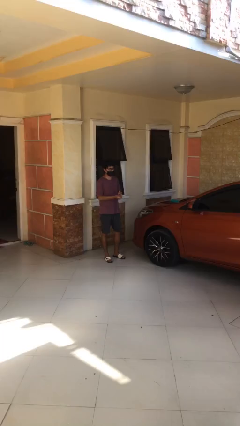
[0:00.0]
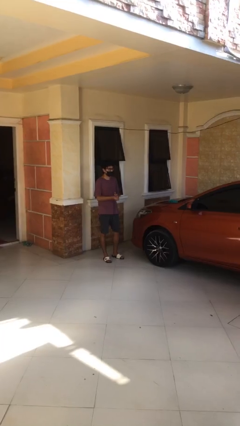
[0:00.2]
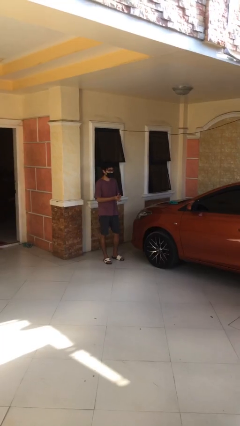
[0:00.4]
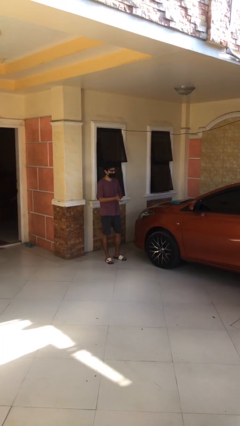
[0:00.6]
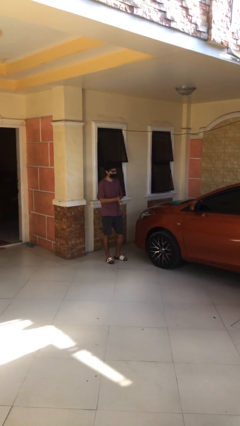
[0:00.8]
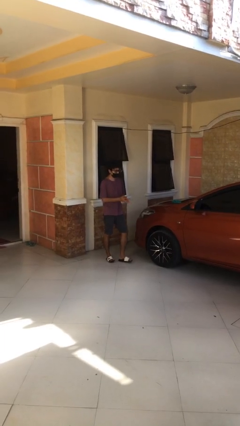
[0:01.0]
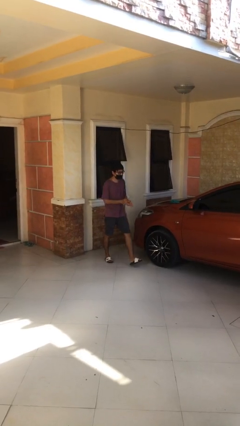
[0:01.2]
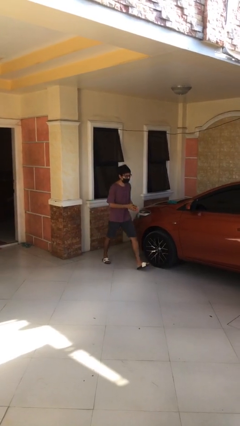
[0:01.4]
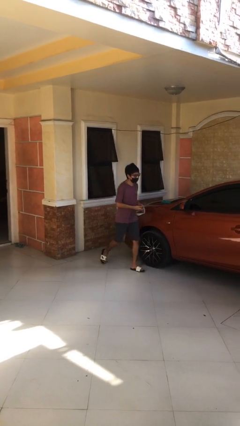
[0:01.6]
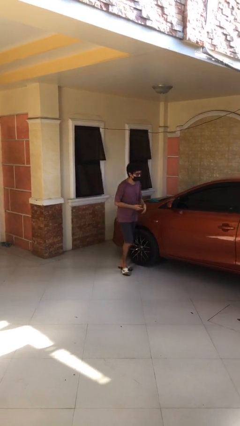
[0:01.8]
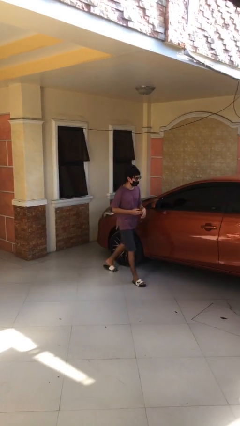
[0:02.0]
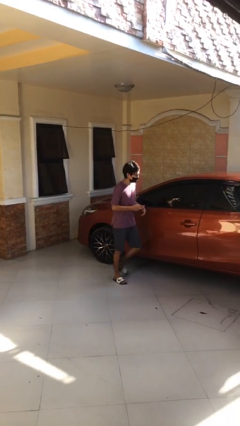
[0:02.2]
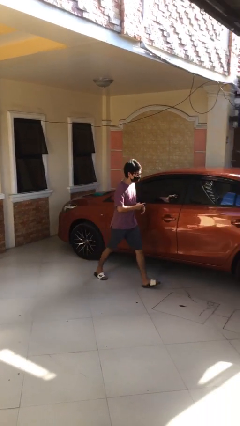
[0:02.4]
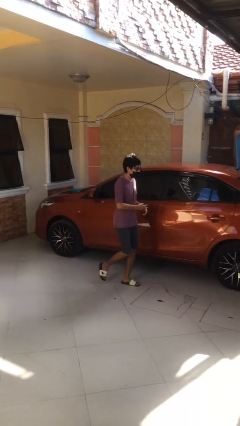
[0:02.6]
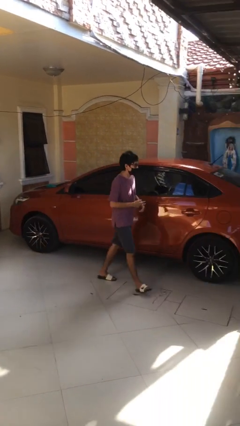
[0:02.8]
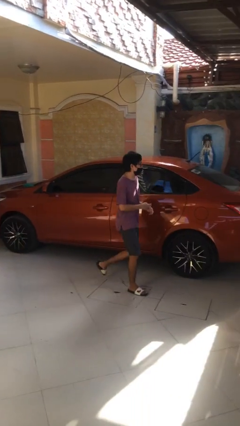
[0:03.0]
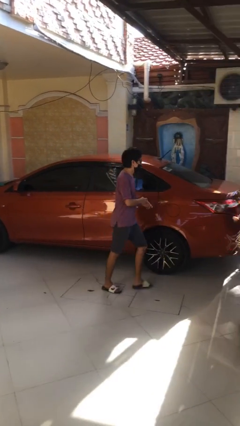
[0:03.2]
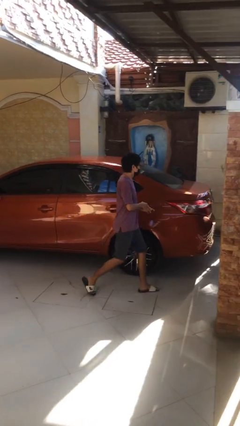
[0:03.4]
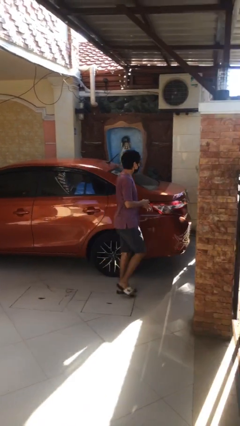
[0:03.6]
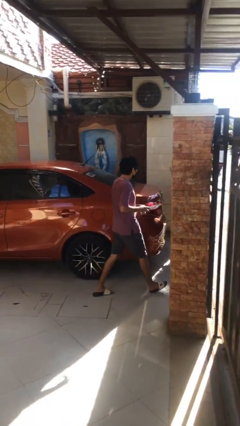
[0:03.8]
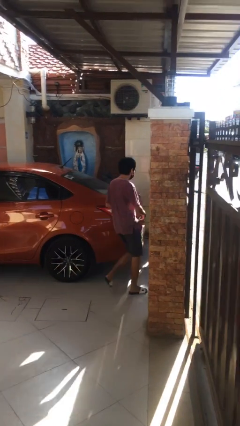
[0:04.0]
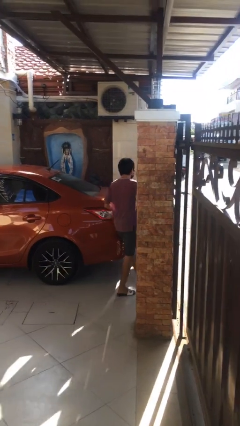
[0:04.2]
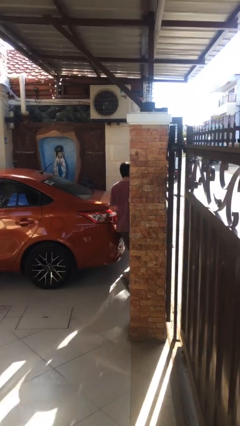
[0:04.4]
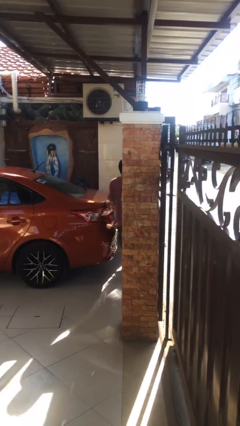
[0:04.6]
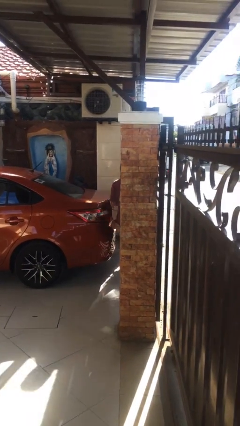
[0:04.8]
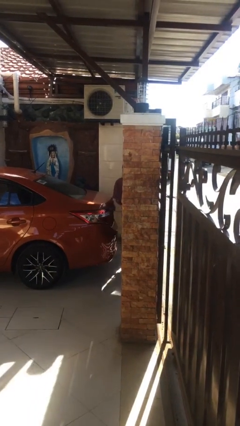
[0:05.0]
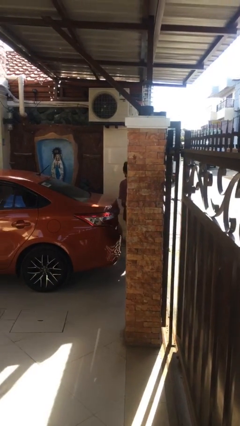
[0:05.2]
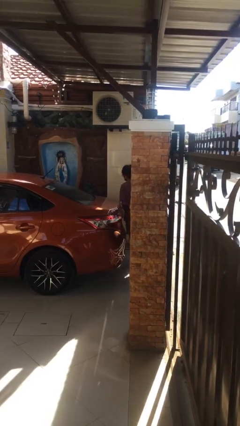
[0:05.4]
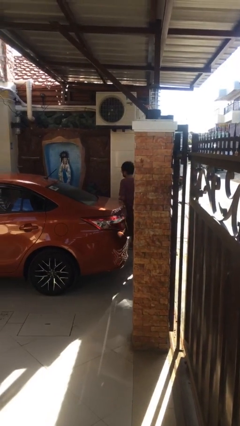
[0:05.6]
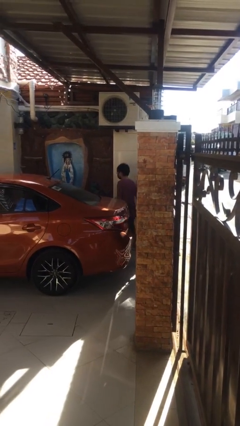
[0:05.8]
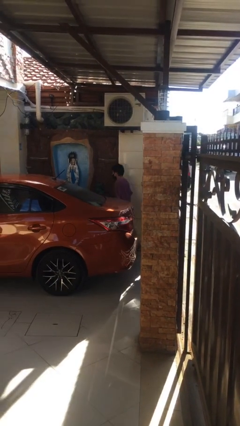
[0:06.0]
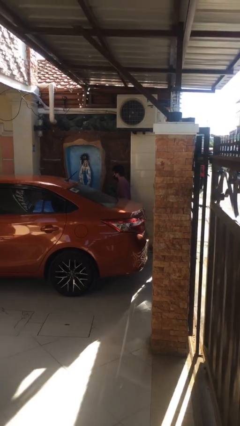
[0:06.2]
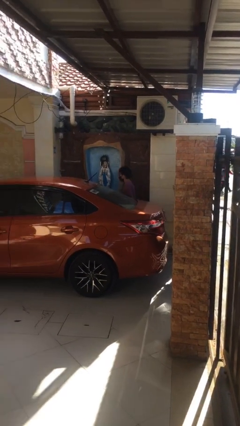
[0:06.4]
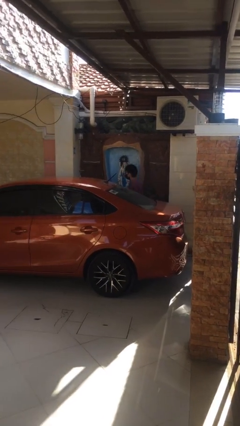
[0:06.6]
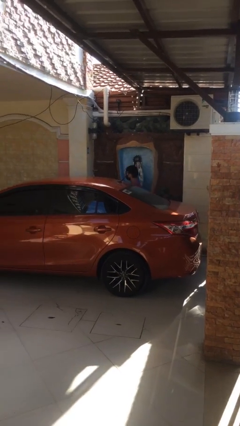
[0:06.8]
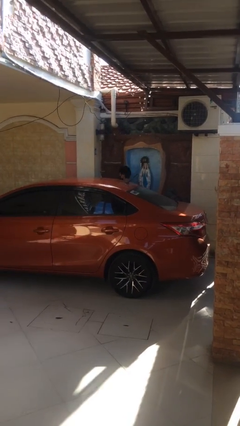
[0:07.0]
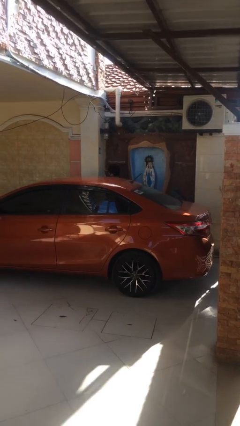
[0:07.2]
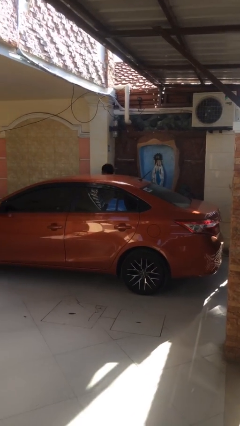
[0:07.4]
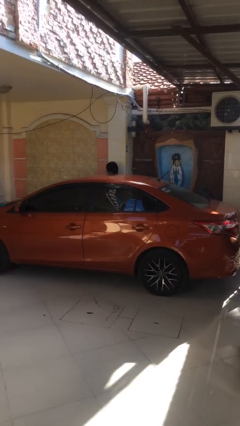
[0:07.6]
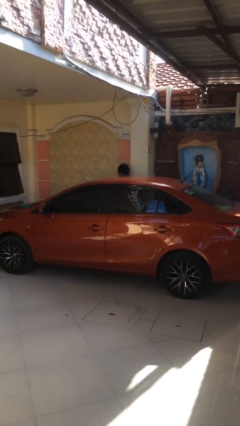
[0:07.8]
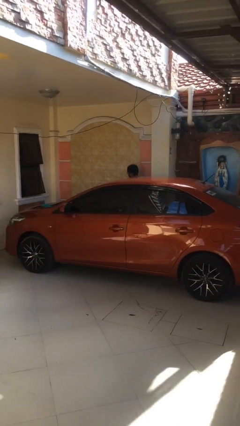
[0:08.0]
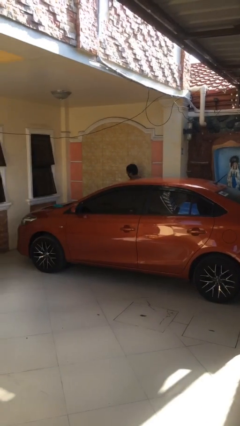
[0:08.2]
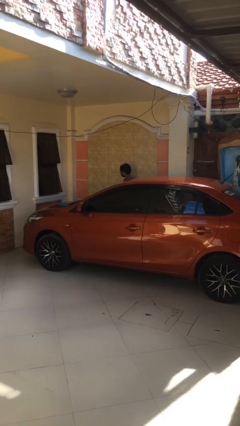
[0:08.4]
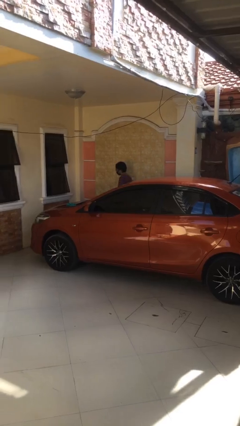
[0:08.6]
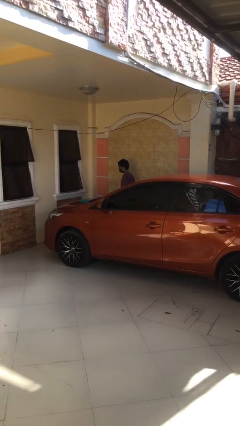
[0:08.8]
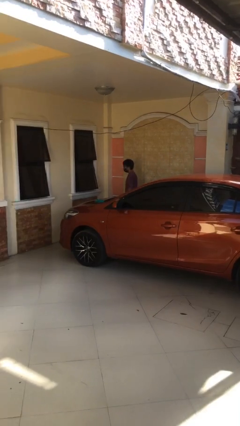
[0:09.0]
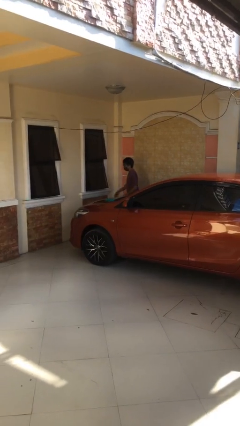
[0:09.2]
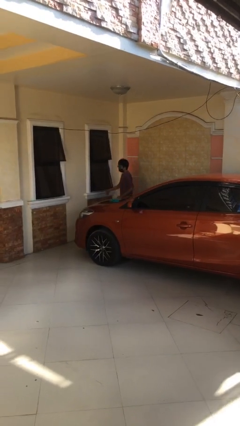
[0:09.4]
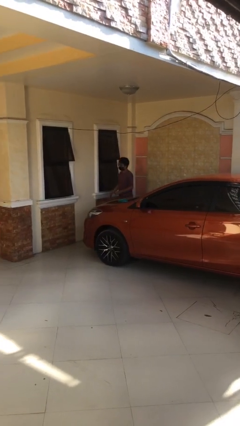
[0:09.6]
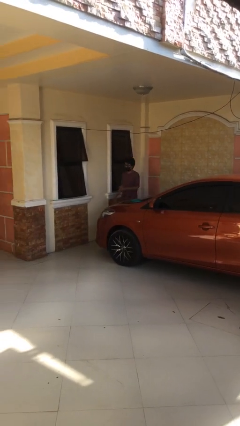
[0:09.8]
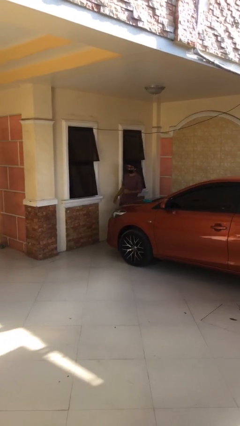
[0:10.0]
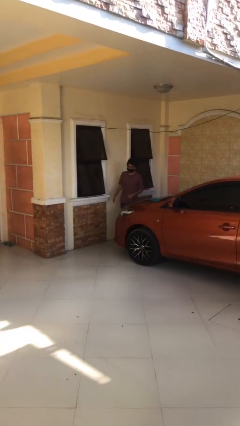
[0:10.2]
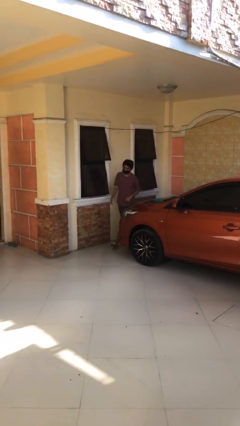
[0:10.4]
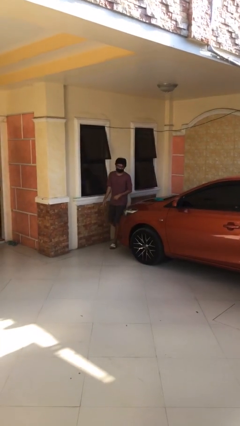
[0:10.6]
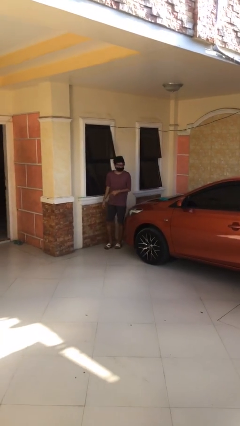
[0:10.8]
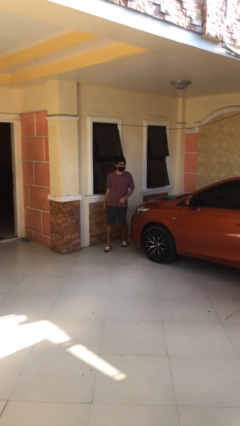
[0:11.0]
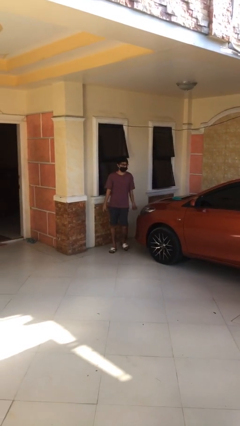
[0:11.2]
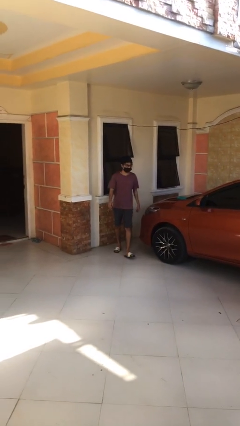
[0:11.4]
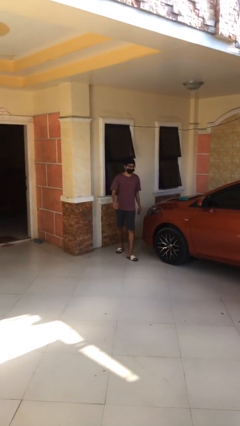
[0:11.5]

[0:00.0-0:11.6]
person walks around car

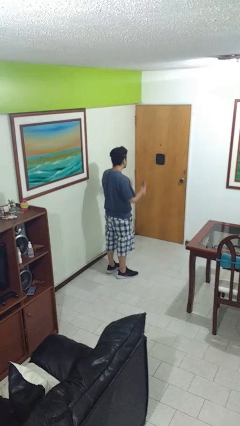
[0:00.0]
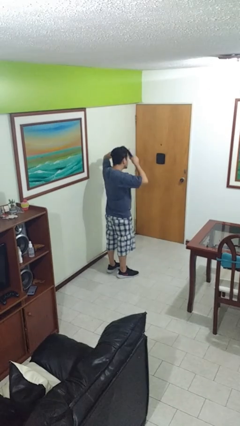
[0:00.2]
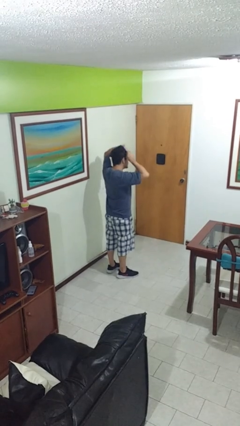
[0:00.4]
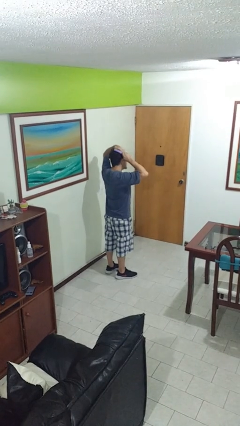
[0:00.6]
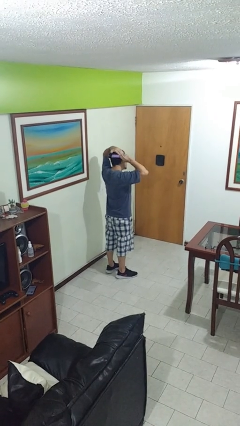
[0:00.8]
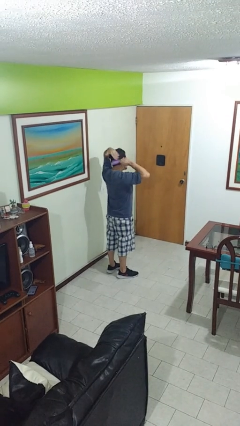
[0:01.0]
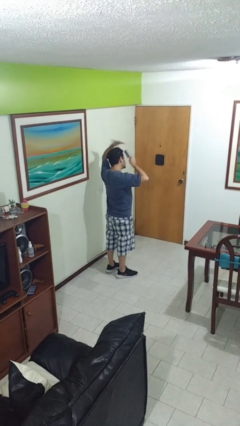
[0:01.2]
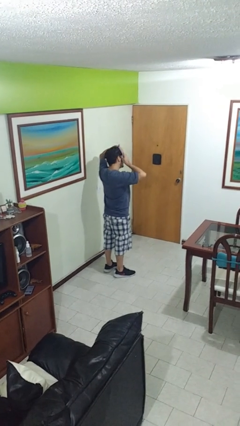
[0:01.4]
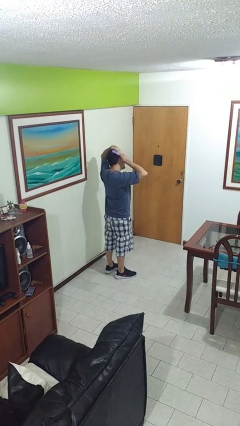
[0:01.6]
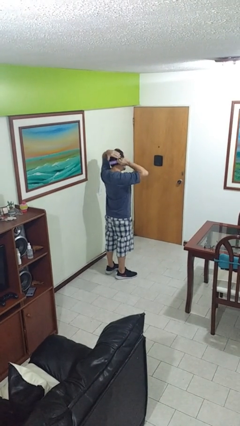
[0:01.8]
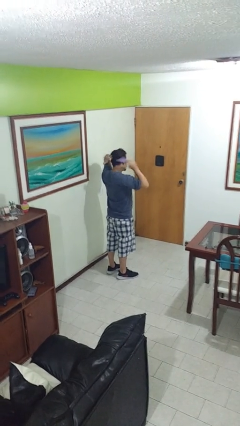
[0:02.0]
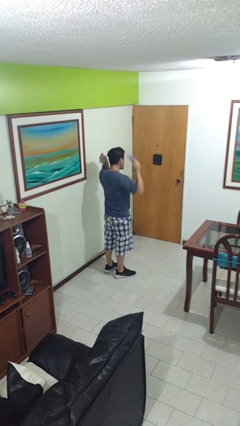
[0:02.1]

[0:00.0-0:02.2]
person brushes hair

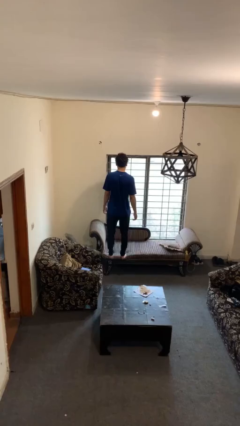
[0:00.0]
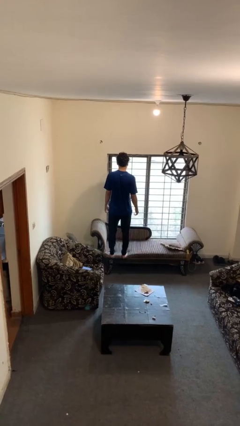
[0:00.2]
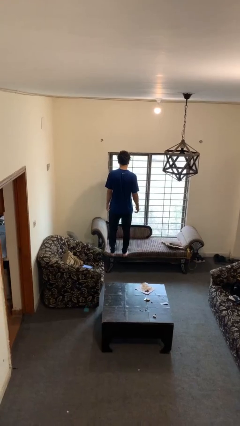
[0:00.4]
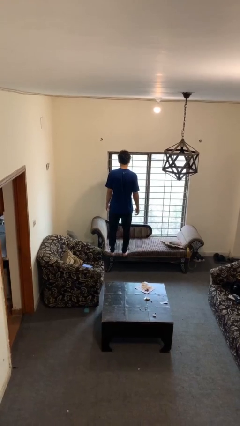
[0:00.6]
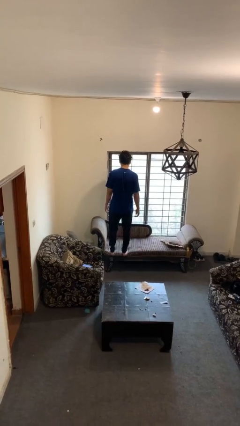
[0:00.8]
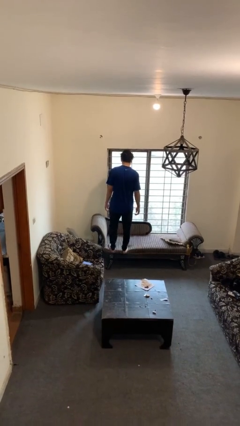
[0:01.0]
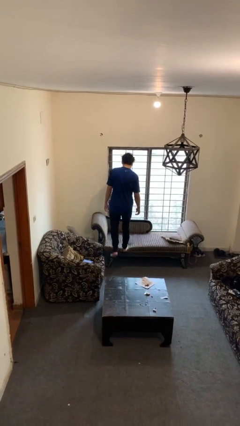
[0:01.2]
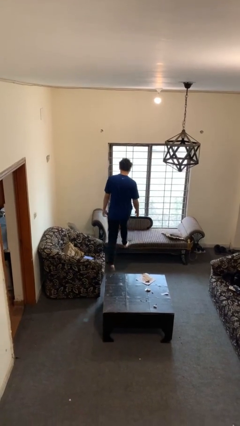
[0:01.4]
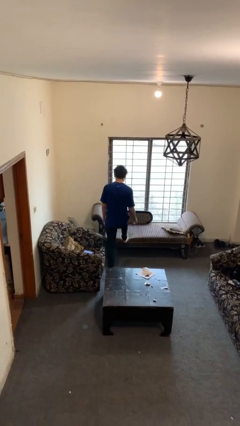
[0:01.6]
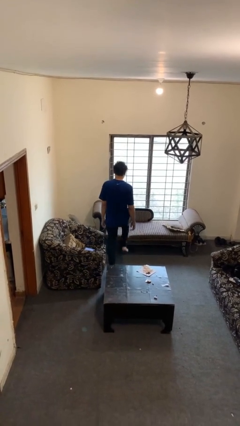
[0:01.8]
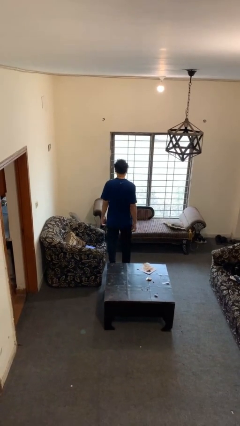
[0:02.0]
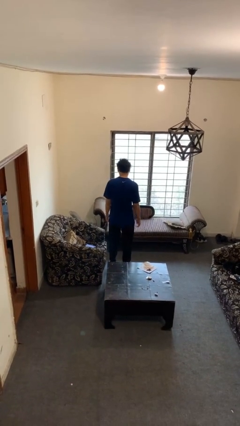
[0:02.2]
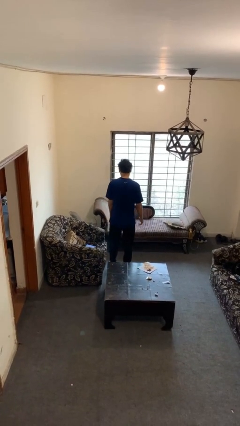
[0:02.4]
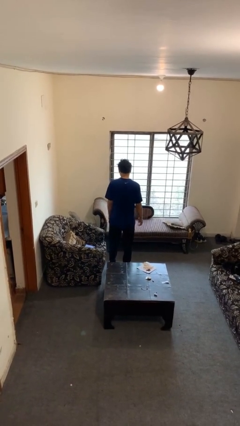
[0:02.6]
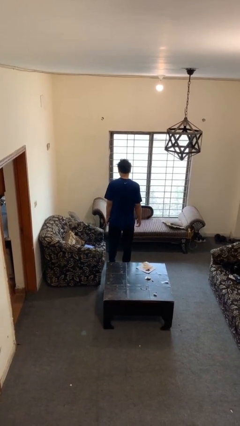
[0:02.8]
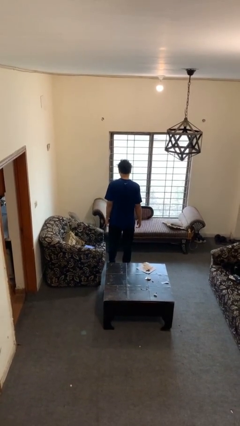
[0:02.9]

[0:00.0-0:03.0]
person climbs off couch

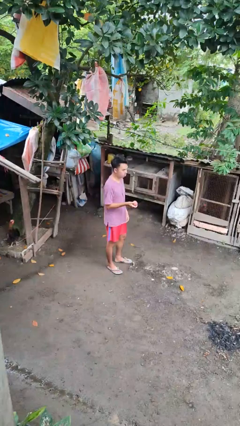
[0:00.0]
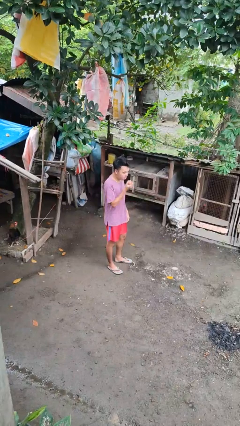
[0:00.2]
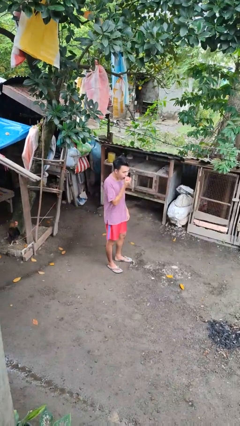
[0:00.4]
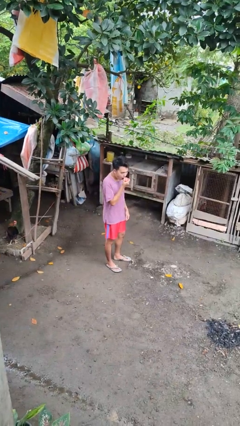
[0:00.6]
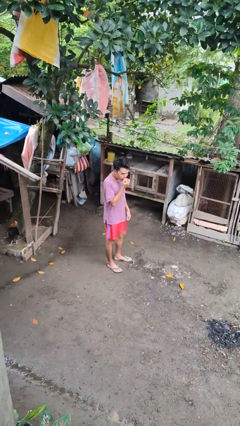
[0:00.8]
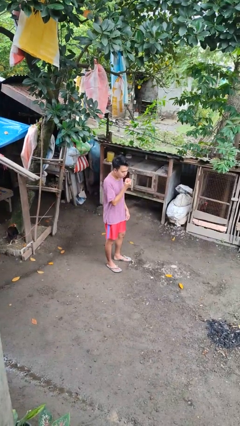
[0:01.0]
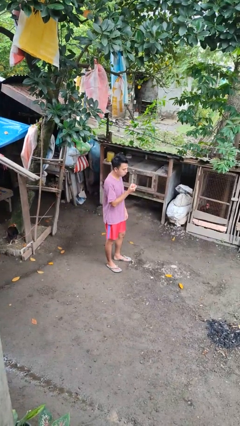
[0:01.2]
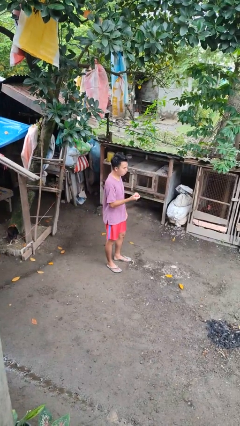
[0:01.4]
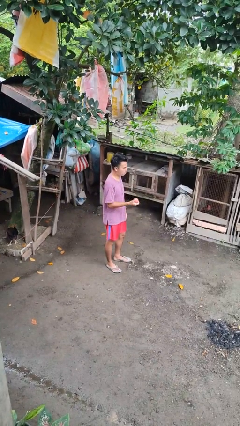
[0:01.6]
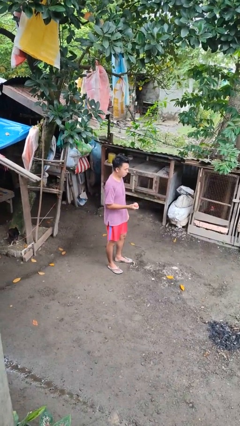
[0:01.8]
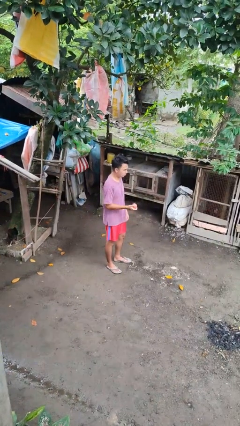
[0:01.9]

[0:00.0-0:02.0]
person eats apple
